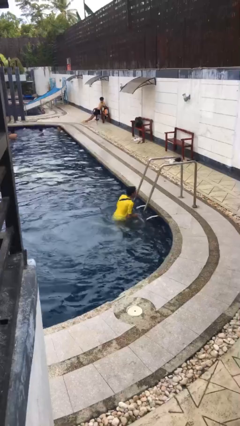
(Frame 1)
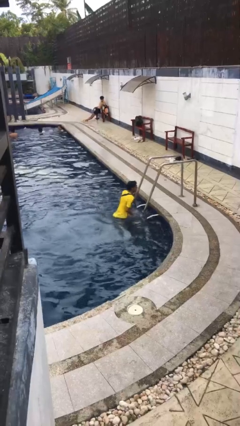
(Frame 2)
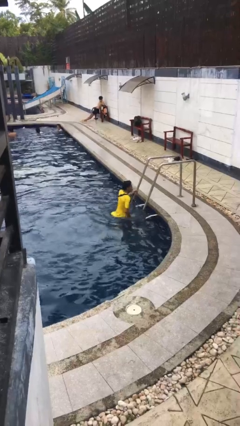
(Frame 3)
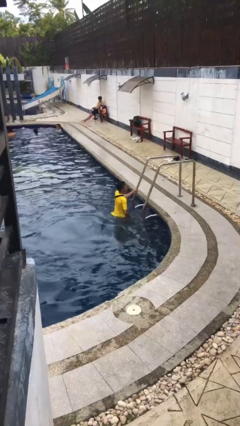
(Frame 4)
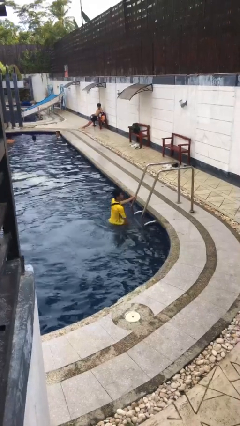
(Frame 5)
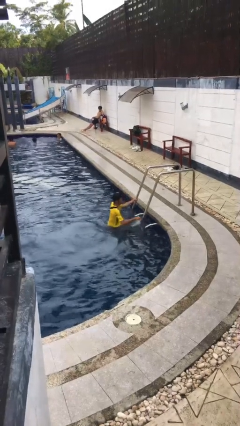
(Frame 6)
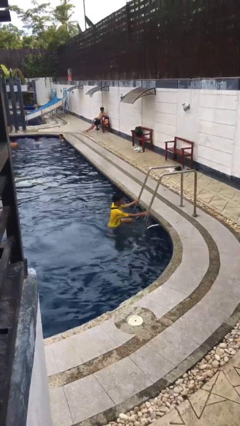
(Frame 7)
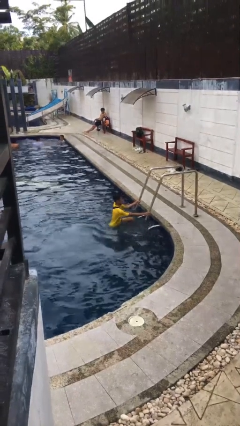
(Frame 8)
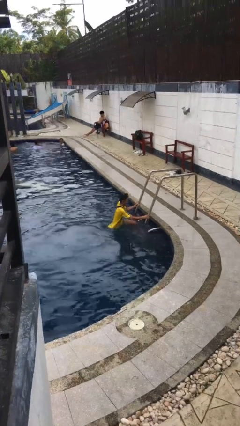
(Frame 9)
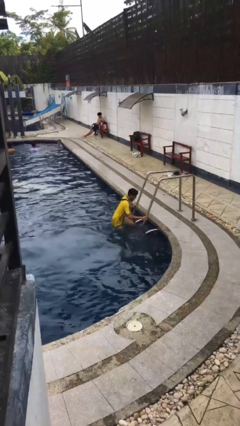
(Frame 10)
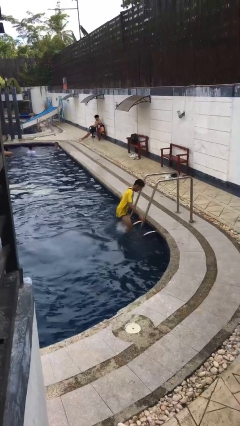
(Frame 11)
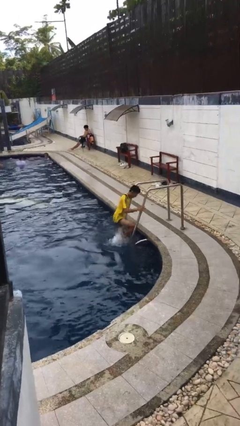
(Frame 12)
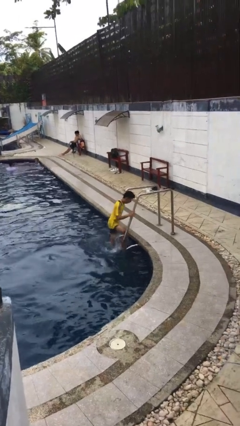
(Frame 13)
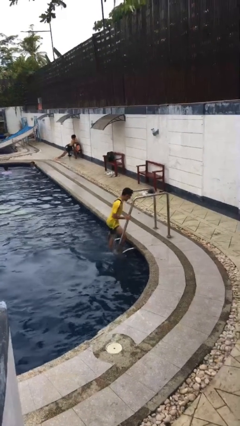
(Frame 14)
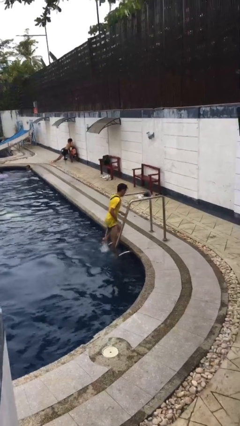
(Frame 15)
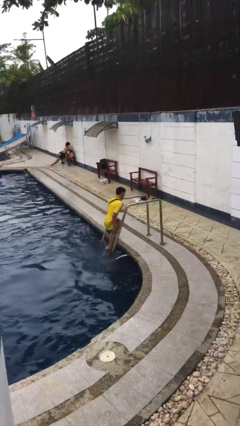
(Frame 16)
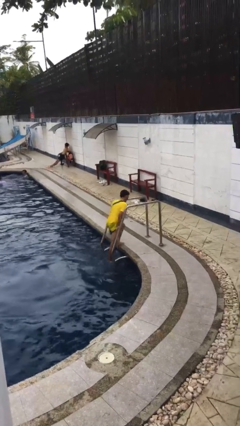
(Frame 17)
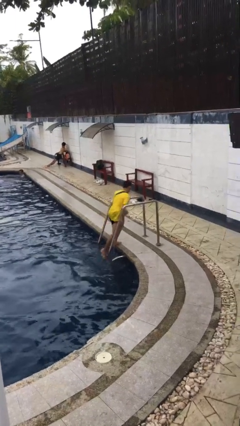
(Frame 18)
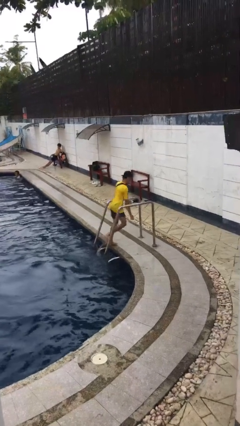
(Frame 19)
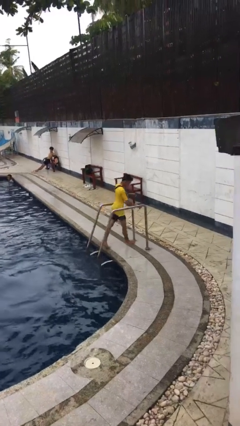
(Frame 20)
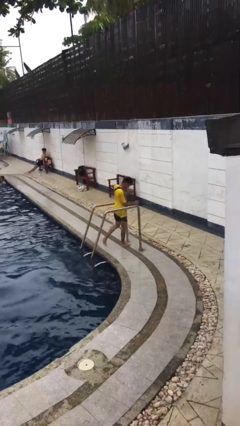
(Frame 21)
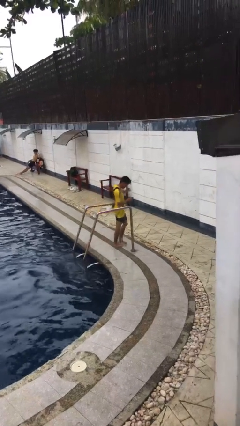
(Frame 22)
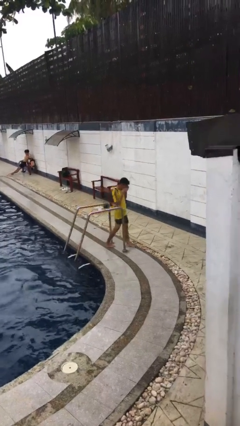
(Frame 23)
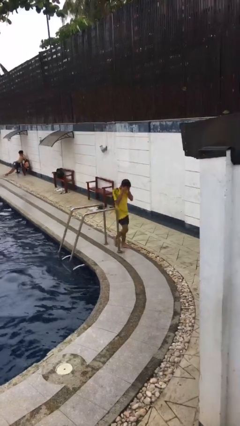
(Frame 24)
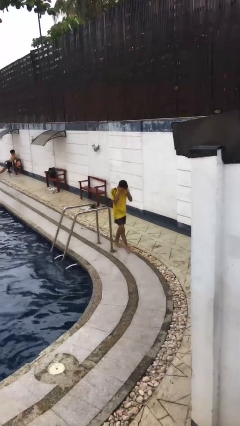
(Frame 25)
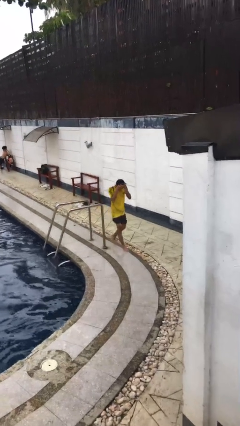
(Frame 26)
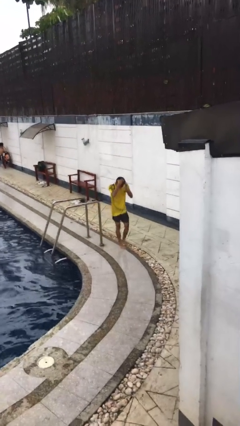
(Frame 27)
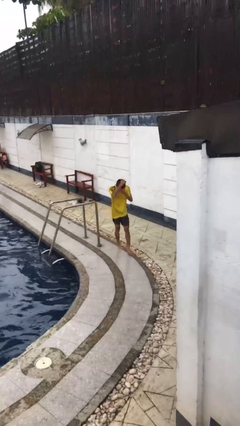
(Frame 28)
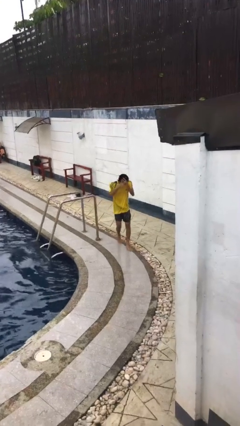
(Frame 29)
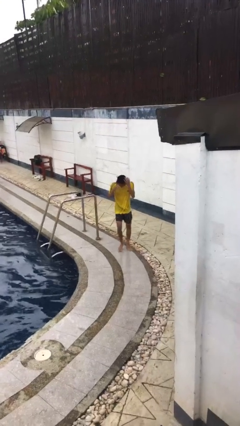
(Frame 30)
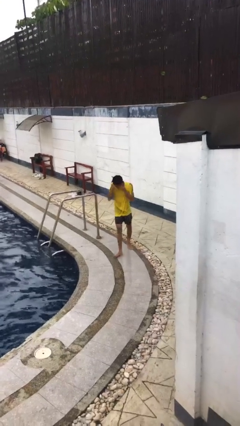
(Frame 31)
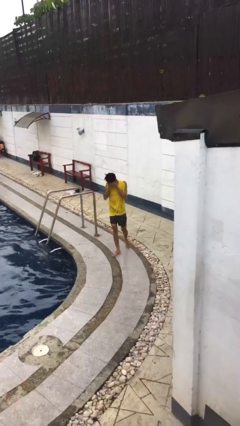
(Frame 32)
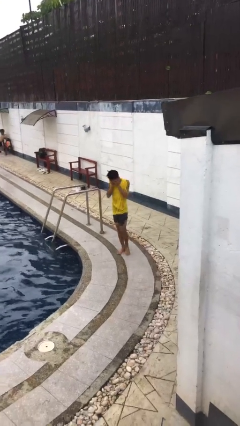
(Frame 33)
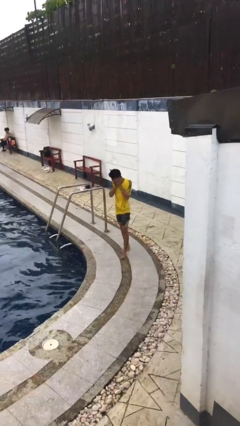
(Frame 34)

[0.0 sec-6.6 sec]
person exits pool

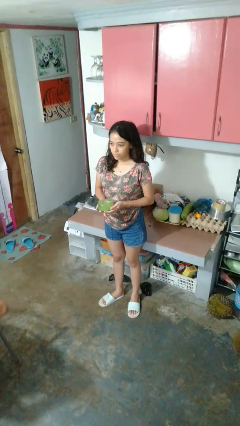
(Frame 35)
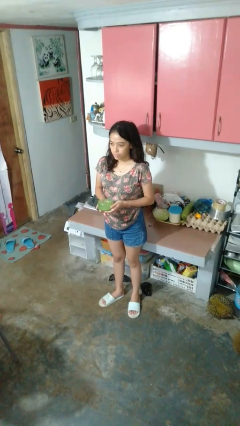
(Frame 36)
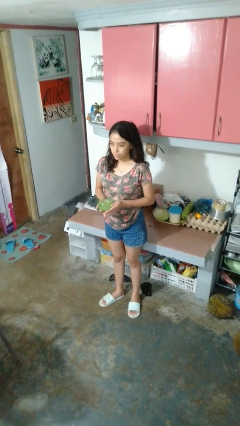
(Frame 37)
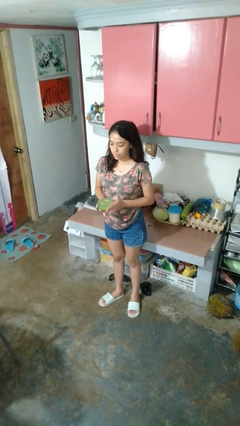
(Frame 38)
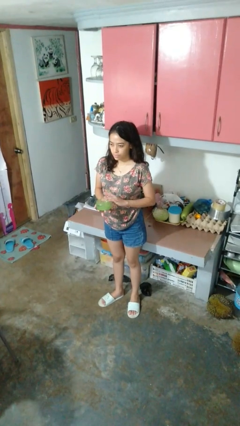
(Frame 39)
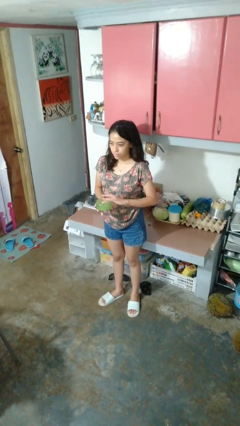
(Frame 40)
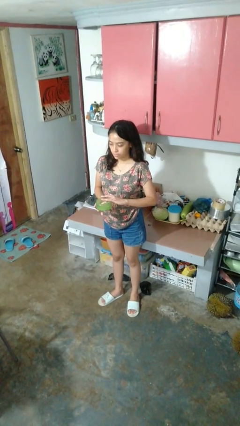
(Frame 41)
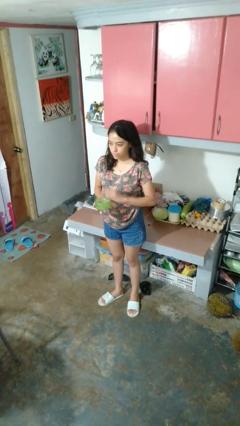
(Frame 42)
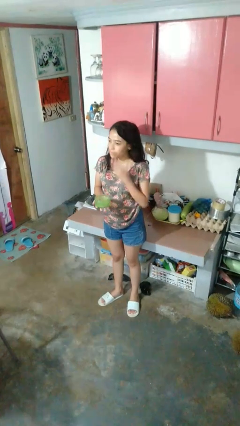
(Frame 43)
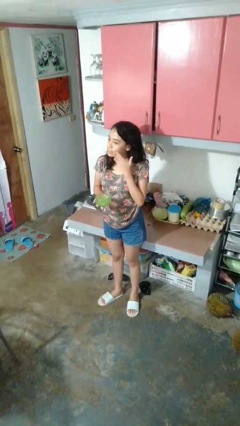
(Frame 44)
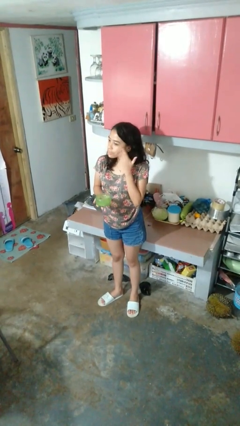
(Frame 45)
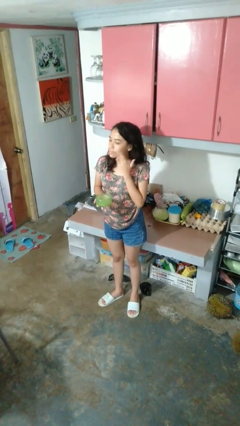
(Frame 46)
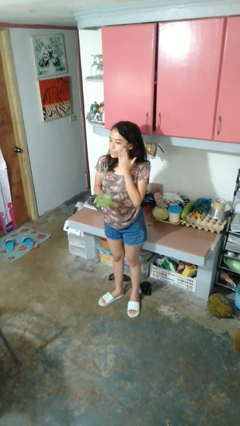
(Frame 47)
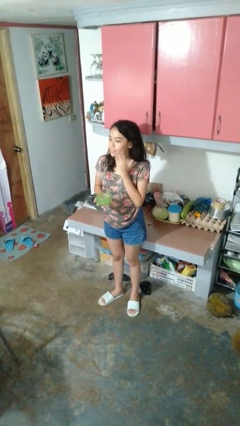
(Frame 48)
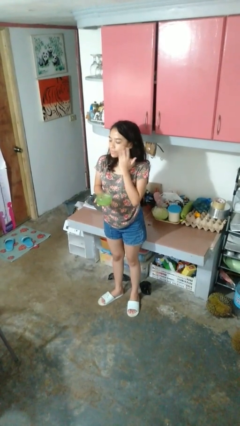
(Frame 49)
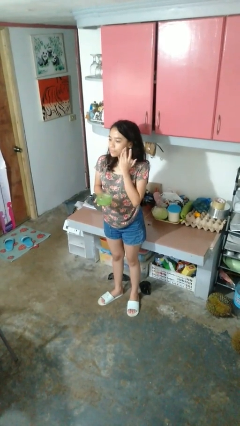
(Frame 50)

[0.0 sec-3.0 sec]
person applies facial moisturizer

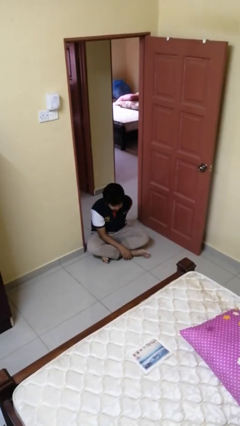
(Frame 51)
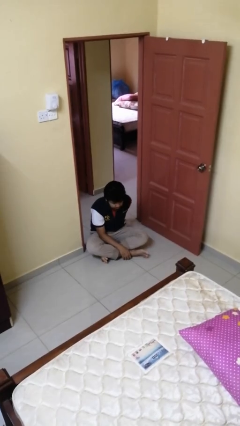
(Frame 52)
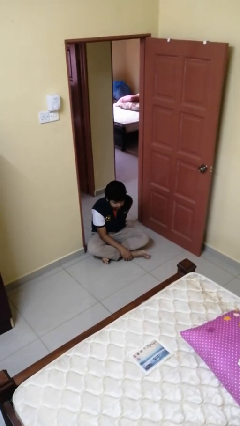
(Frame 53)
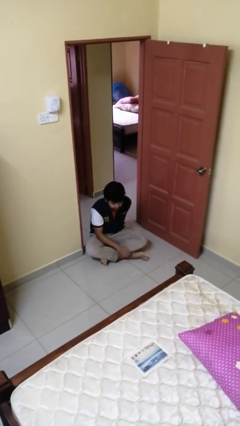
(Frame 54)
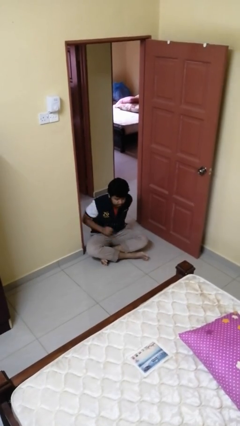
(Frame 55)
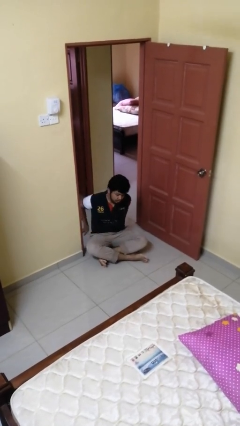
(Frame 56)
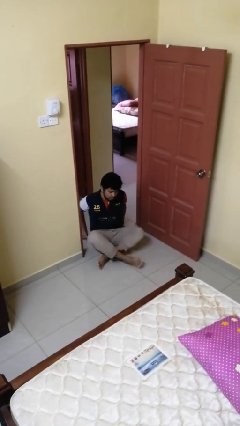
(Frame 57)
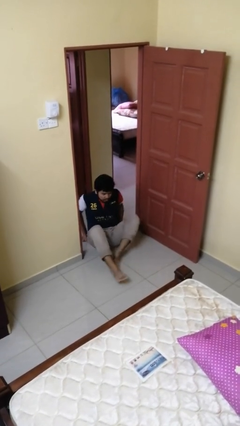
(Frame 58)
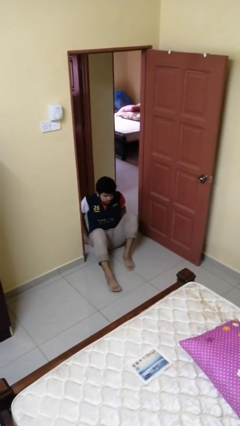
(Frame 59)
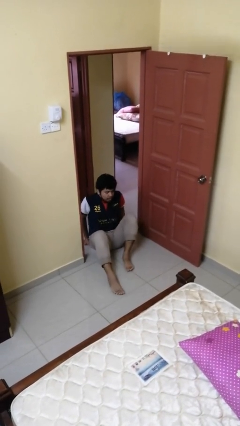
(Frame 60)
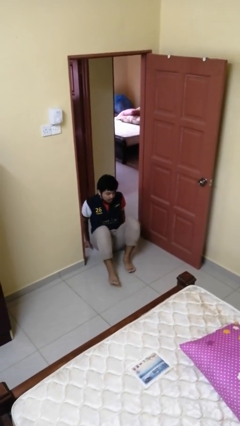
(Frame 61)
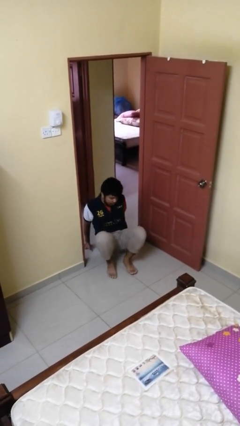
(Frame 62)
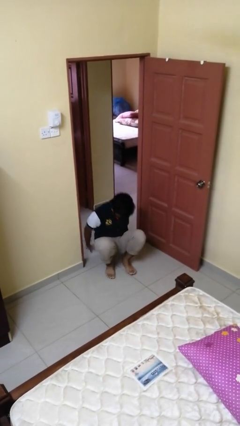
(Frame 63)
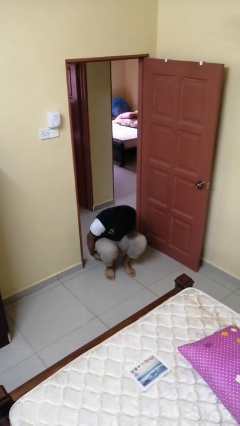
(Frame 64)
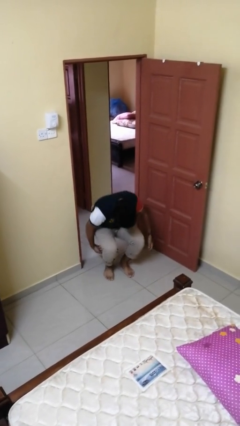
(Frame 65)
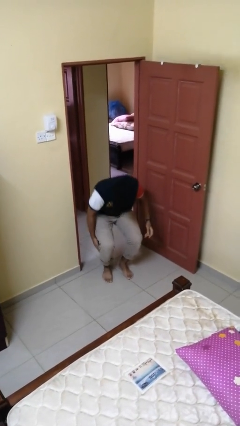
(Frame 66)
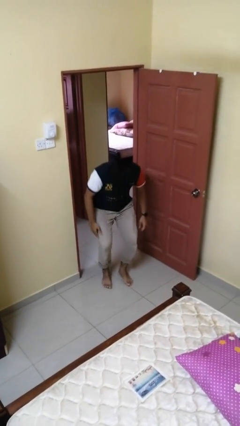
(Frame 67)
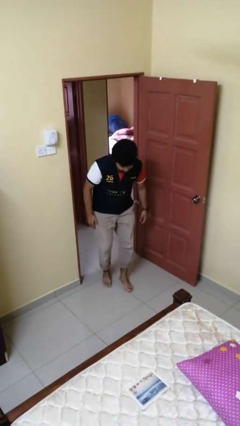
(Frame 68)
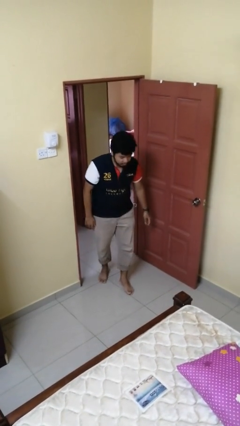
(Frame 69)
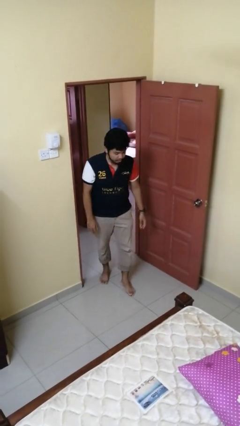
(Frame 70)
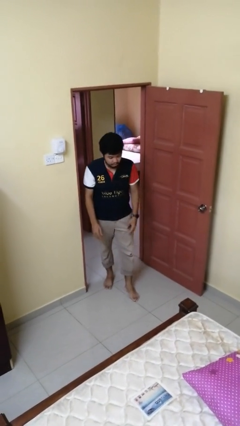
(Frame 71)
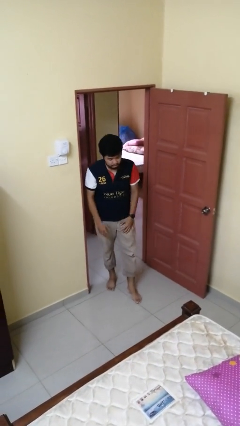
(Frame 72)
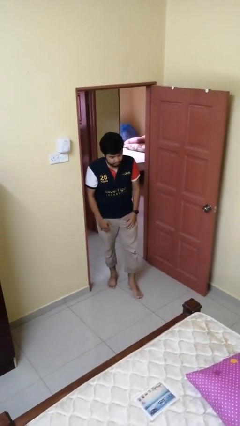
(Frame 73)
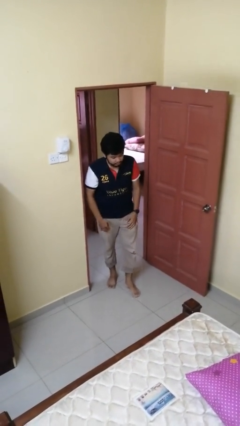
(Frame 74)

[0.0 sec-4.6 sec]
person stands up from floor

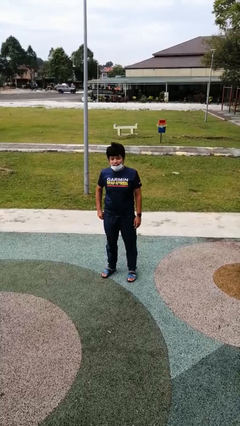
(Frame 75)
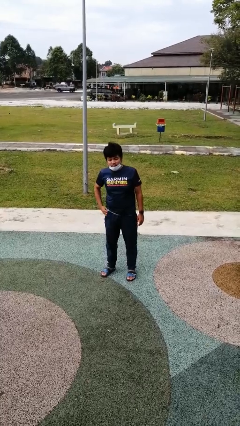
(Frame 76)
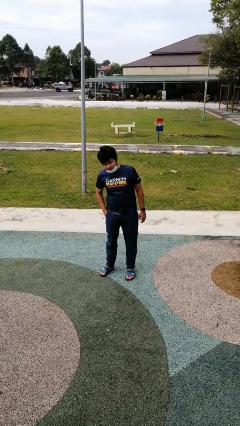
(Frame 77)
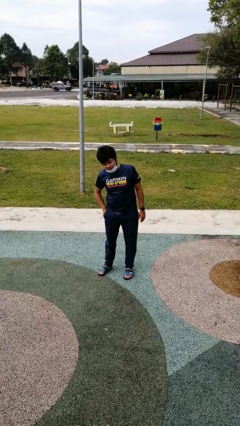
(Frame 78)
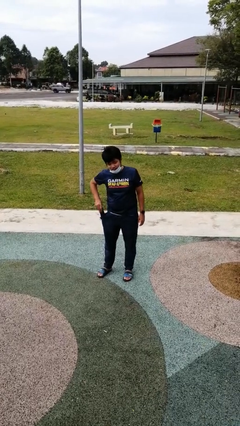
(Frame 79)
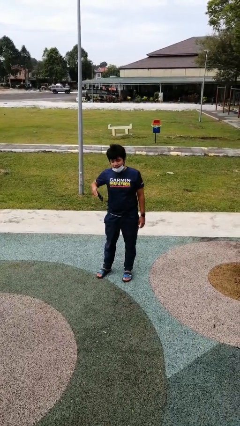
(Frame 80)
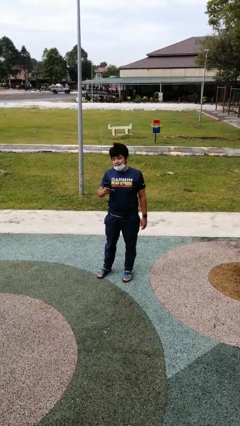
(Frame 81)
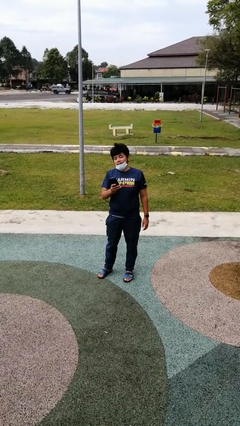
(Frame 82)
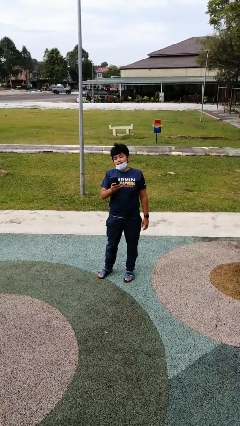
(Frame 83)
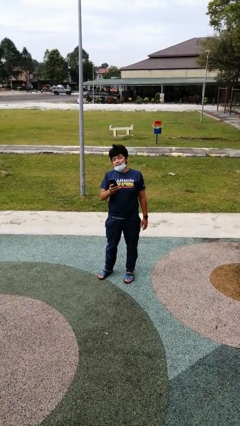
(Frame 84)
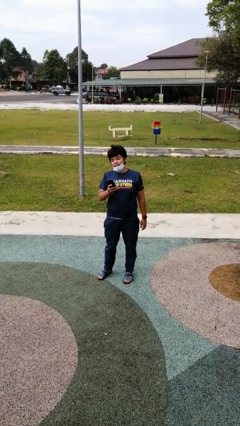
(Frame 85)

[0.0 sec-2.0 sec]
person takes phone from pocket

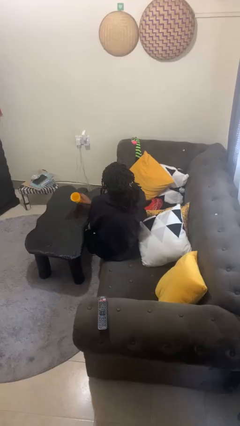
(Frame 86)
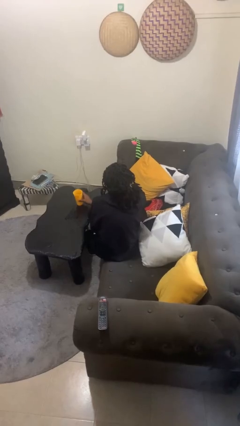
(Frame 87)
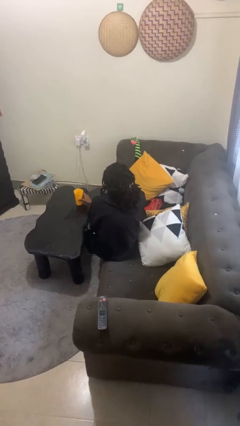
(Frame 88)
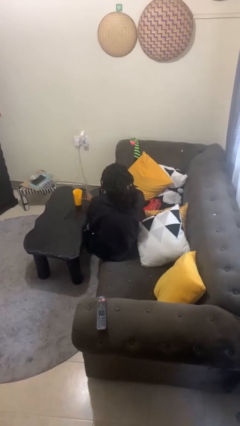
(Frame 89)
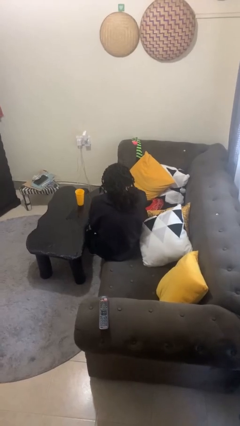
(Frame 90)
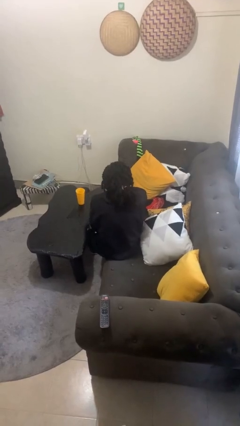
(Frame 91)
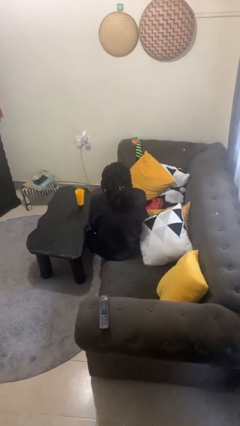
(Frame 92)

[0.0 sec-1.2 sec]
person sets upright glass

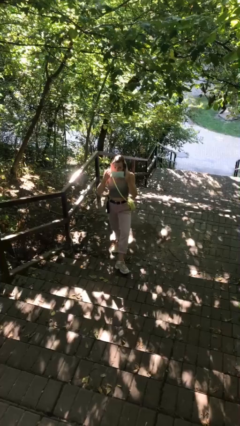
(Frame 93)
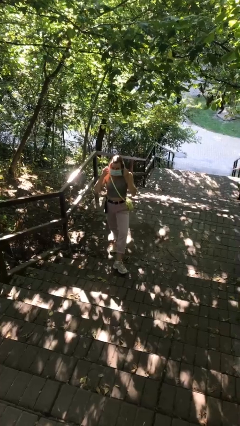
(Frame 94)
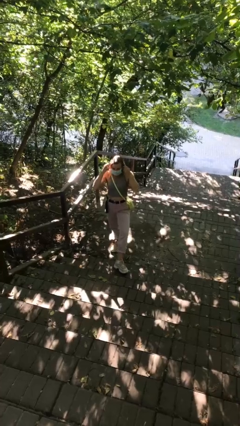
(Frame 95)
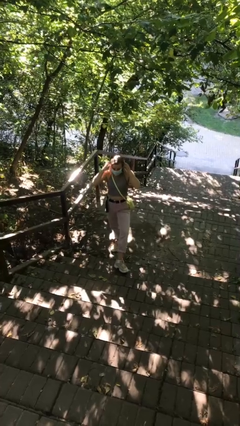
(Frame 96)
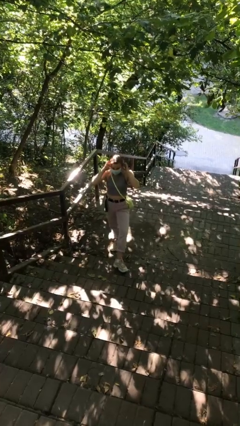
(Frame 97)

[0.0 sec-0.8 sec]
person puts on facemask
